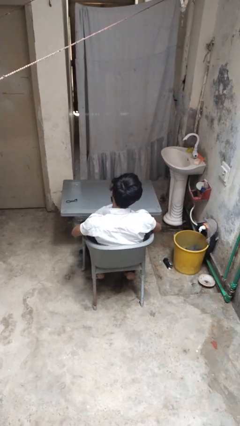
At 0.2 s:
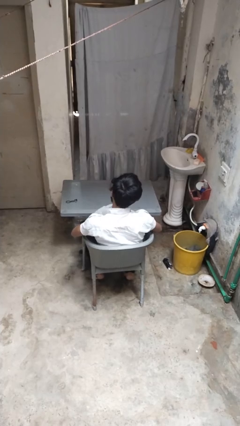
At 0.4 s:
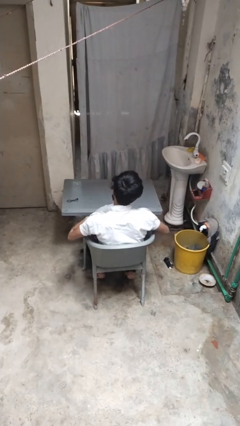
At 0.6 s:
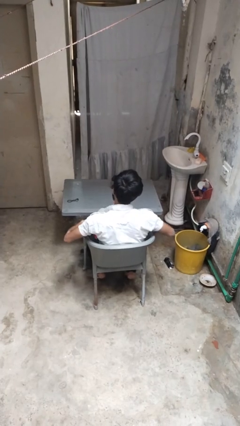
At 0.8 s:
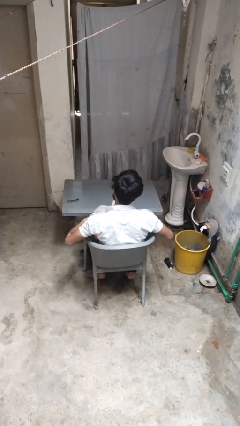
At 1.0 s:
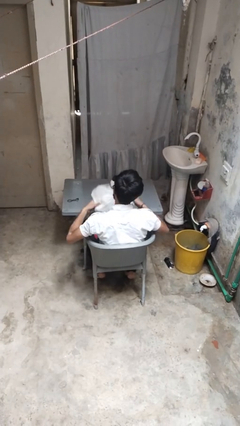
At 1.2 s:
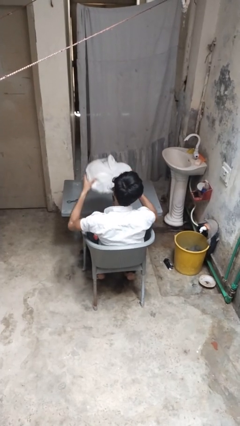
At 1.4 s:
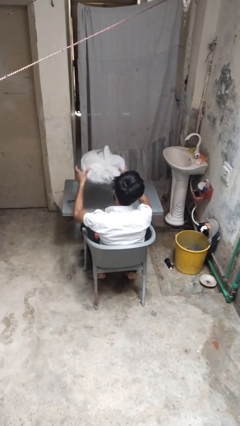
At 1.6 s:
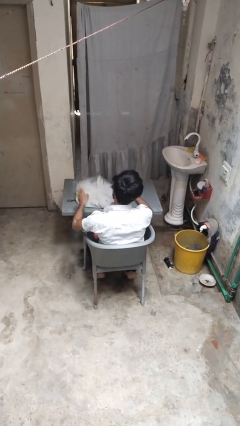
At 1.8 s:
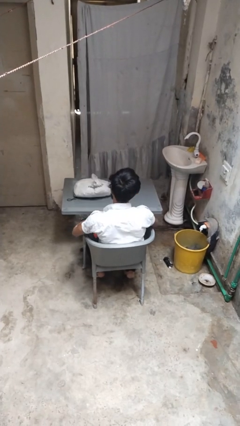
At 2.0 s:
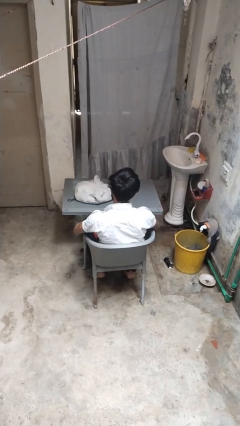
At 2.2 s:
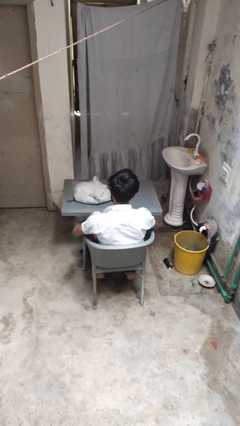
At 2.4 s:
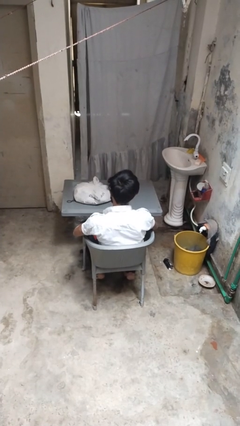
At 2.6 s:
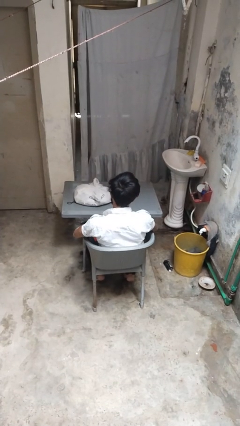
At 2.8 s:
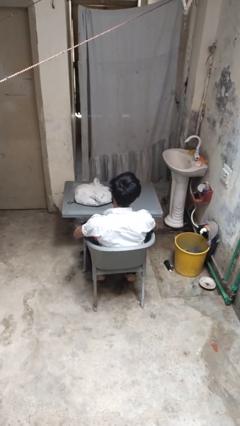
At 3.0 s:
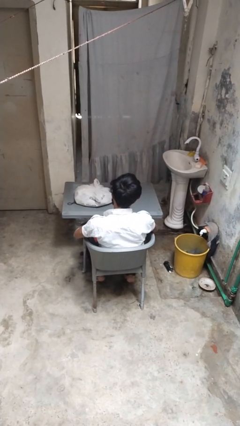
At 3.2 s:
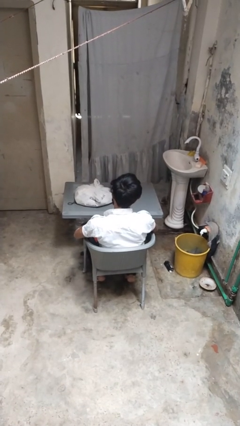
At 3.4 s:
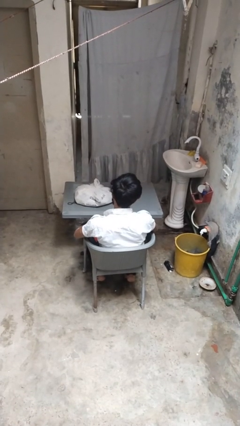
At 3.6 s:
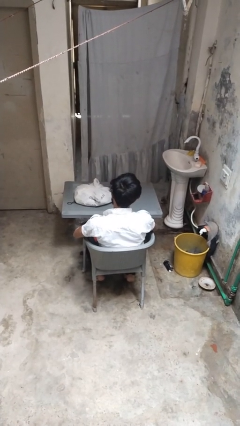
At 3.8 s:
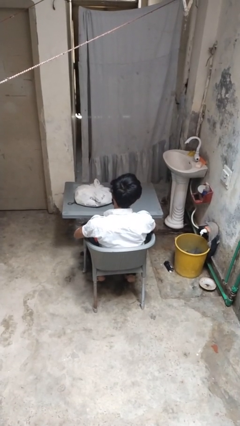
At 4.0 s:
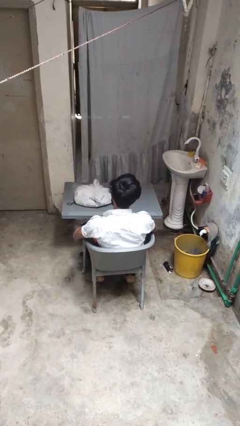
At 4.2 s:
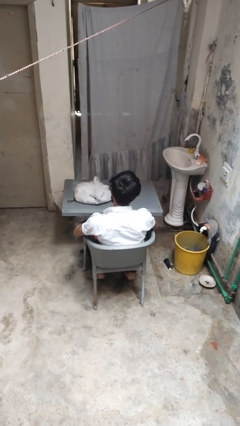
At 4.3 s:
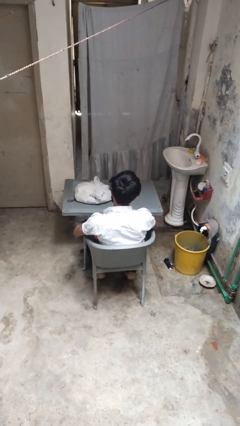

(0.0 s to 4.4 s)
person throws object on table

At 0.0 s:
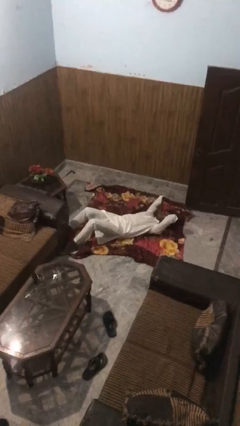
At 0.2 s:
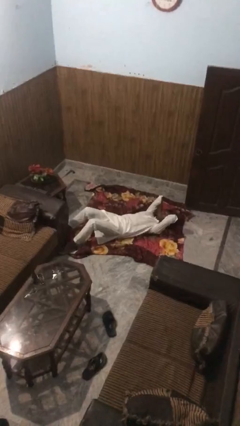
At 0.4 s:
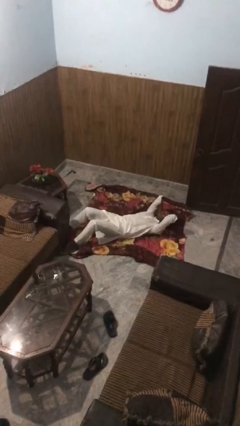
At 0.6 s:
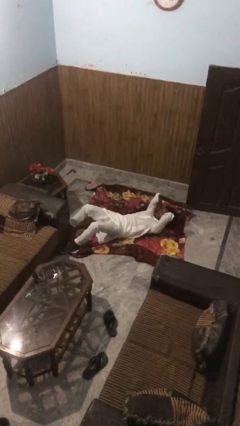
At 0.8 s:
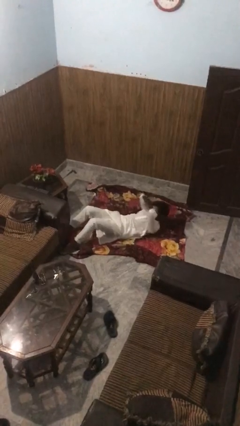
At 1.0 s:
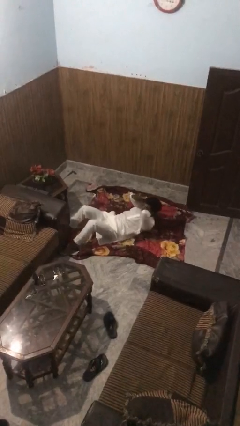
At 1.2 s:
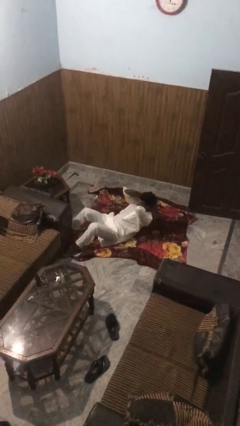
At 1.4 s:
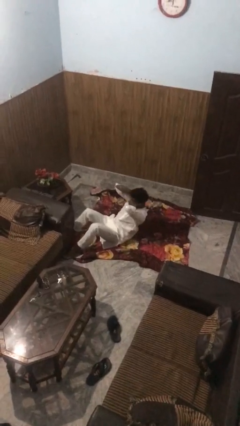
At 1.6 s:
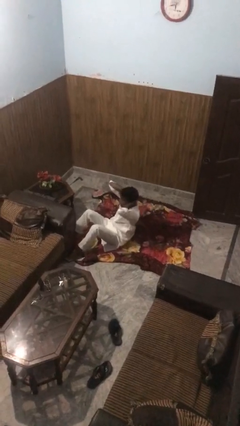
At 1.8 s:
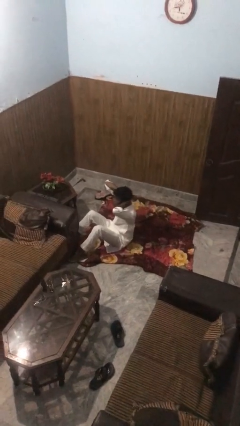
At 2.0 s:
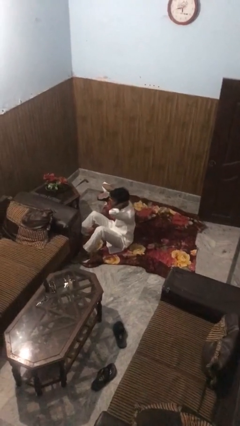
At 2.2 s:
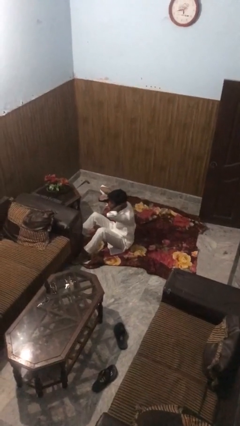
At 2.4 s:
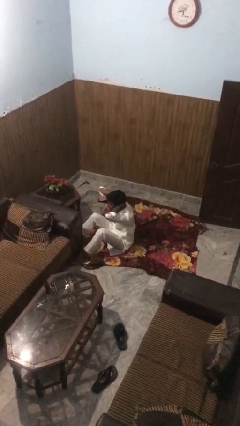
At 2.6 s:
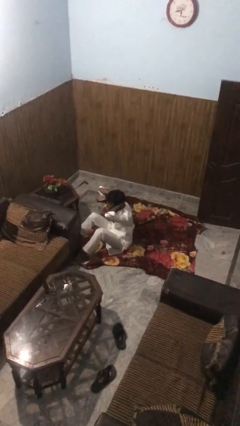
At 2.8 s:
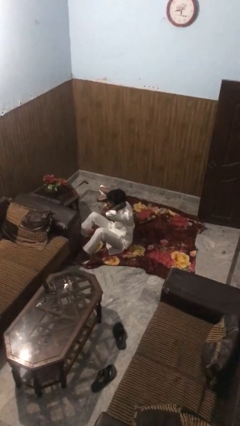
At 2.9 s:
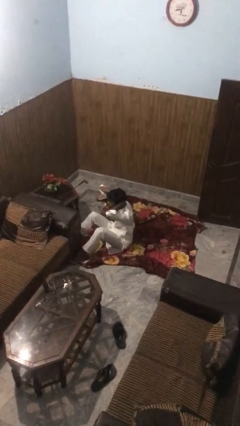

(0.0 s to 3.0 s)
person exercises with situp

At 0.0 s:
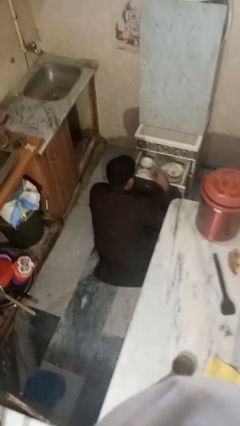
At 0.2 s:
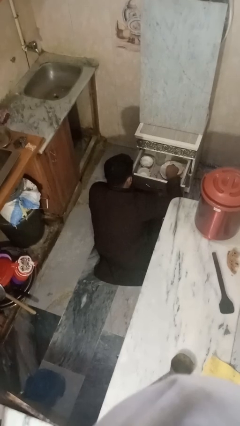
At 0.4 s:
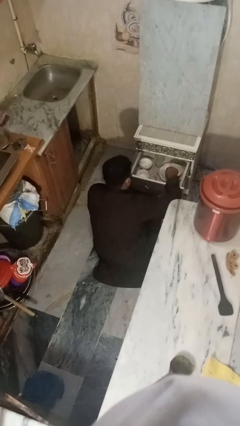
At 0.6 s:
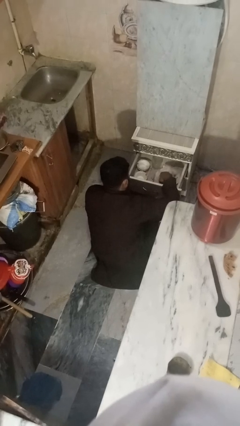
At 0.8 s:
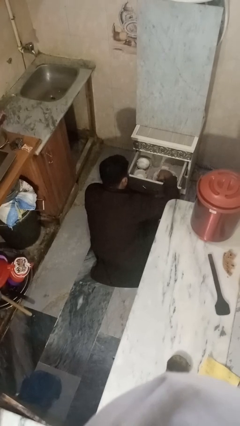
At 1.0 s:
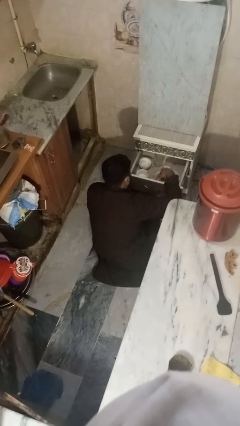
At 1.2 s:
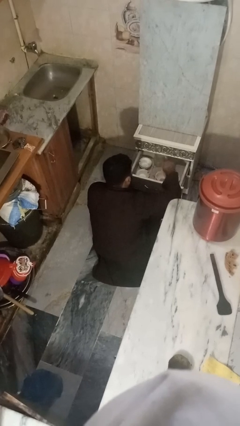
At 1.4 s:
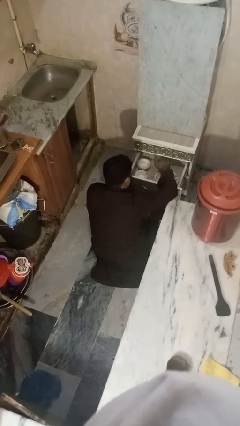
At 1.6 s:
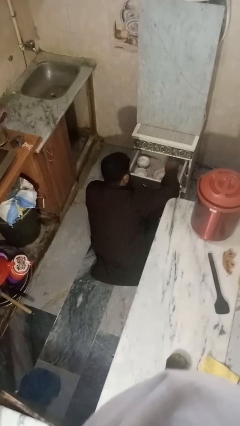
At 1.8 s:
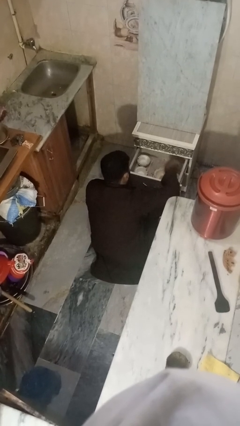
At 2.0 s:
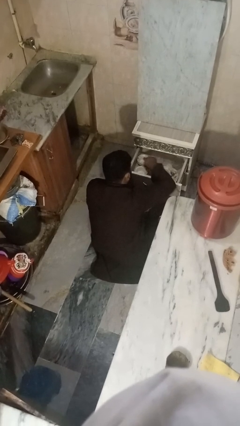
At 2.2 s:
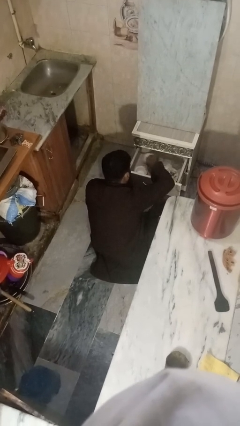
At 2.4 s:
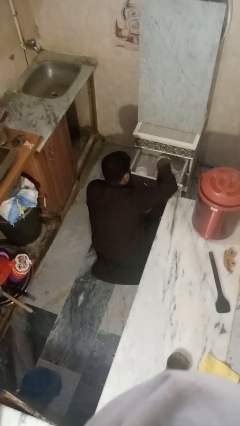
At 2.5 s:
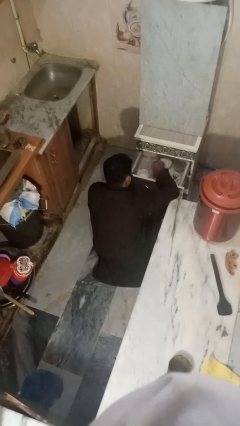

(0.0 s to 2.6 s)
person searches in kitchen drawer

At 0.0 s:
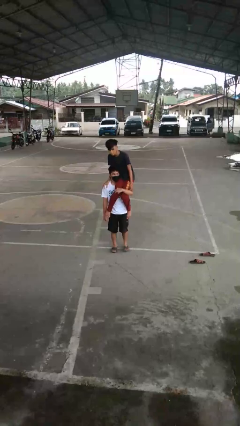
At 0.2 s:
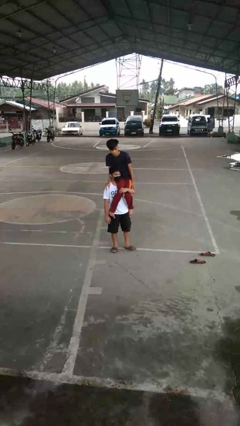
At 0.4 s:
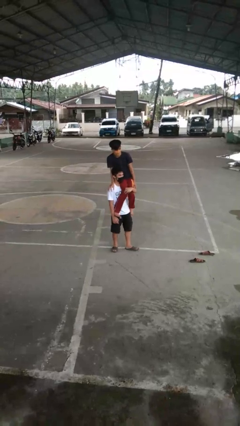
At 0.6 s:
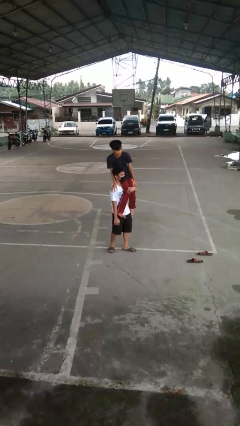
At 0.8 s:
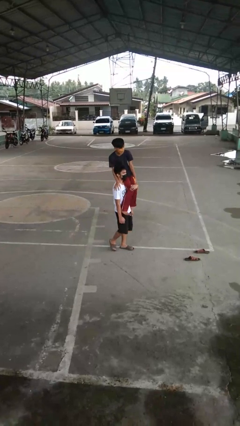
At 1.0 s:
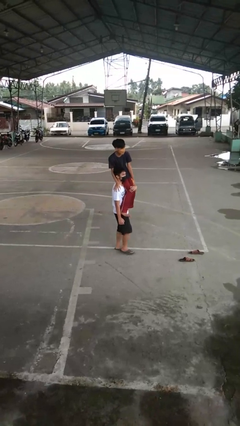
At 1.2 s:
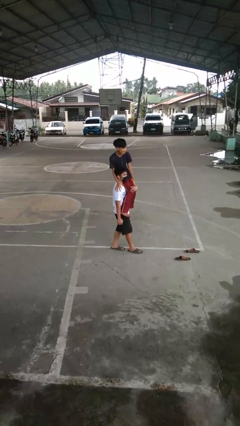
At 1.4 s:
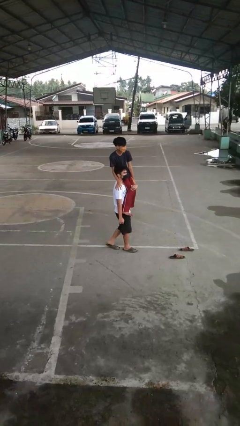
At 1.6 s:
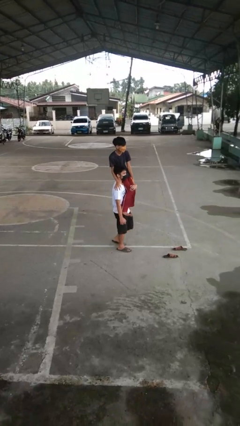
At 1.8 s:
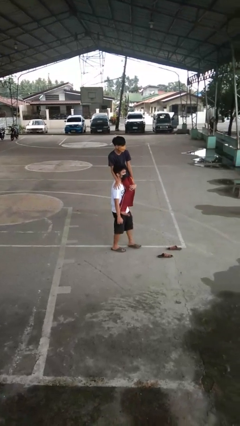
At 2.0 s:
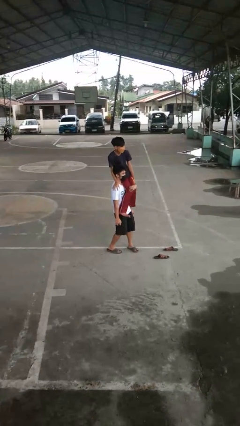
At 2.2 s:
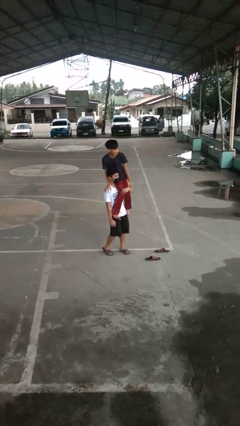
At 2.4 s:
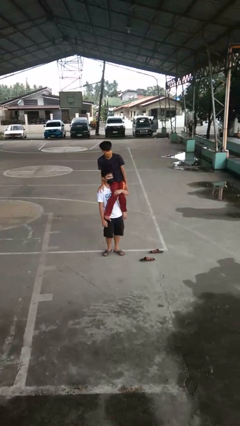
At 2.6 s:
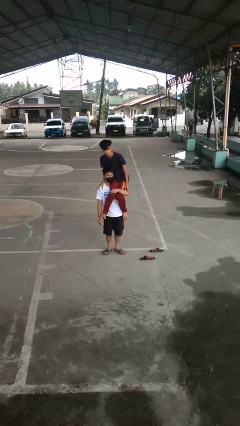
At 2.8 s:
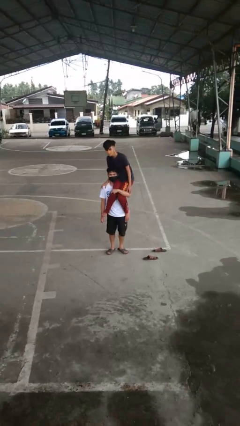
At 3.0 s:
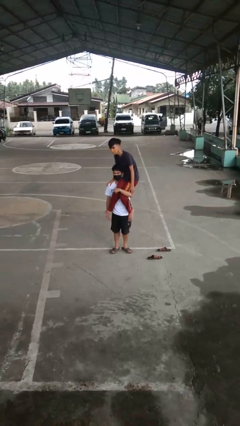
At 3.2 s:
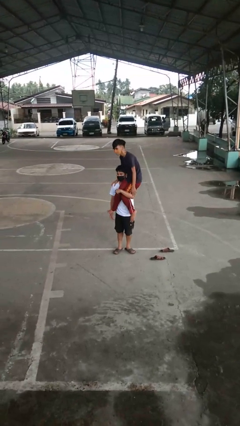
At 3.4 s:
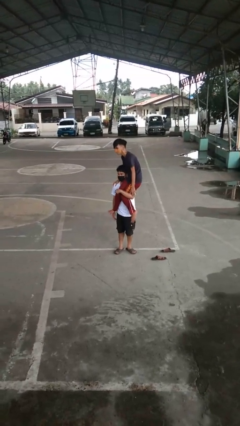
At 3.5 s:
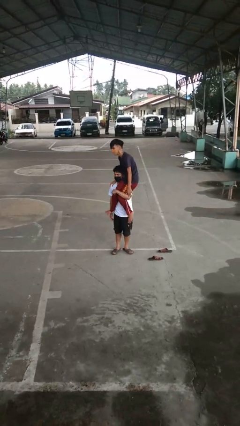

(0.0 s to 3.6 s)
person carries person on shoulders

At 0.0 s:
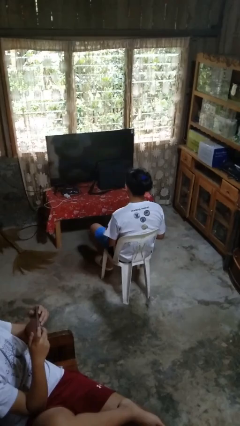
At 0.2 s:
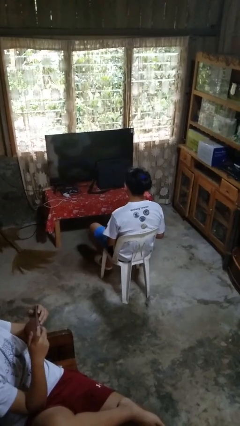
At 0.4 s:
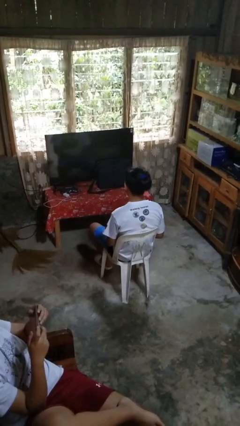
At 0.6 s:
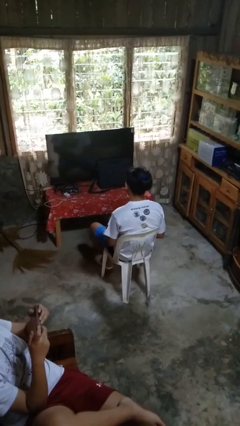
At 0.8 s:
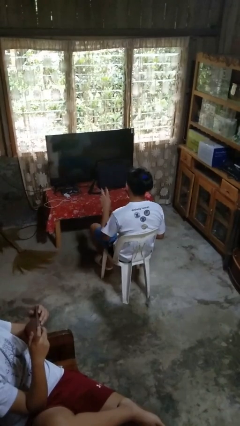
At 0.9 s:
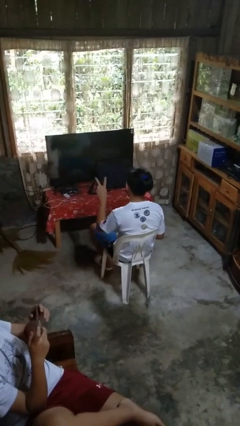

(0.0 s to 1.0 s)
person gestures peace

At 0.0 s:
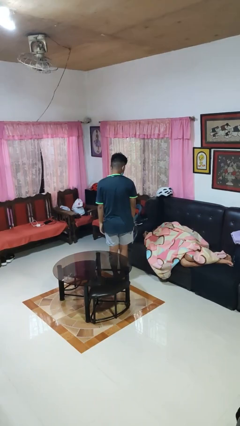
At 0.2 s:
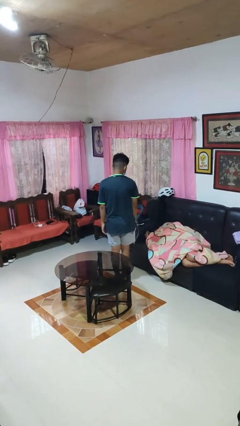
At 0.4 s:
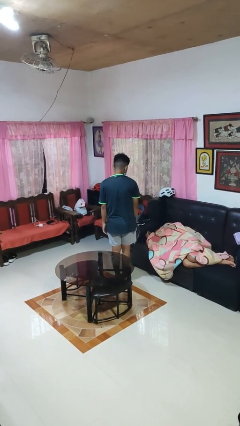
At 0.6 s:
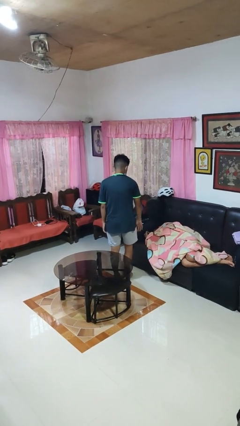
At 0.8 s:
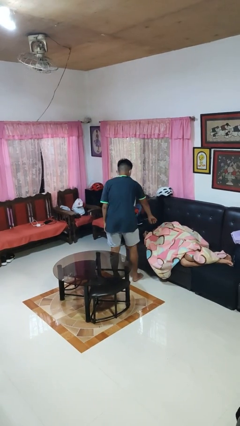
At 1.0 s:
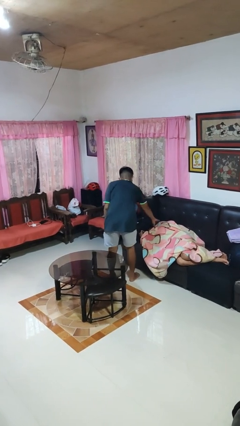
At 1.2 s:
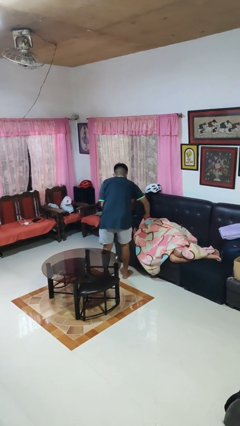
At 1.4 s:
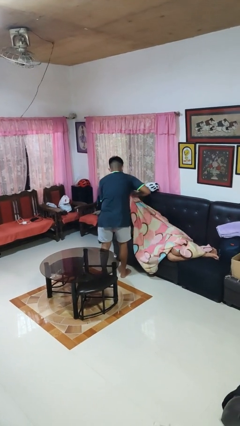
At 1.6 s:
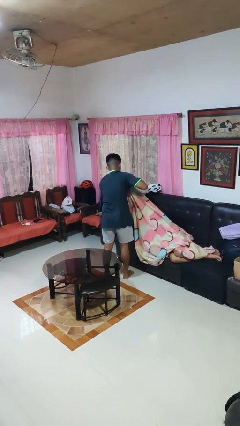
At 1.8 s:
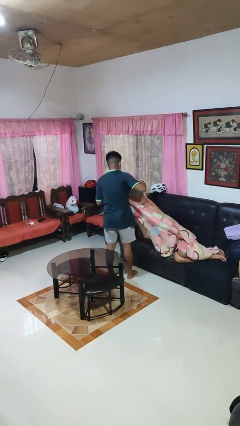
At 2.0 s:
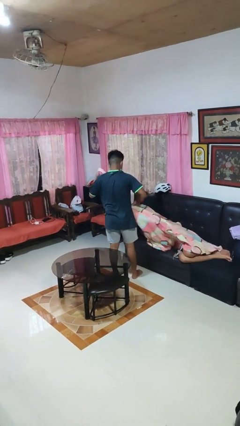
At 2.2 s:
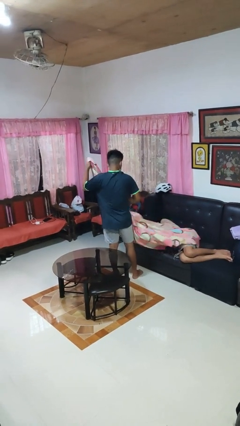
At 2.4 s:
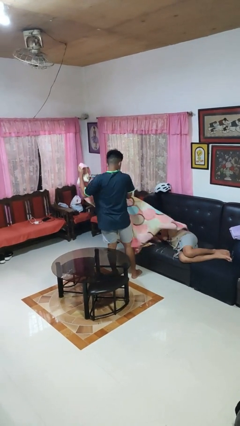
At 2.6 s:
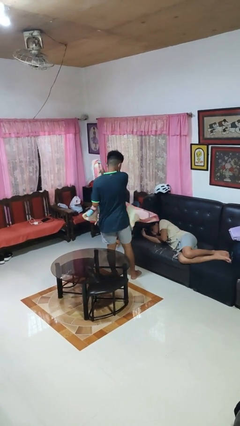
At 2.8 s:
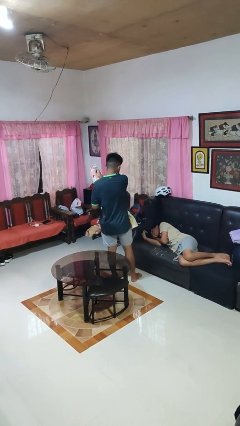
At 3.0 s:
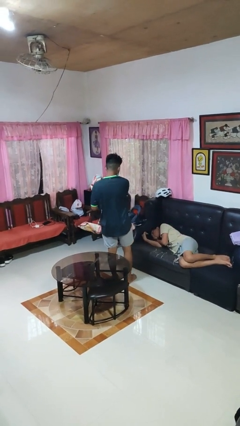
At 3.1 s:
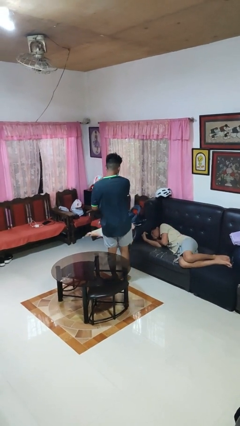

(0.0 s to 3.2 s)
person uncovers friend with blanket
